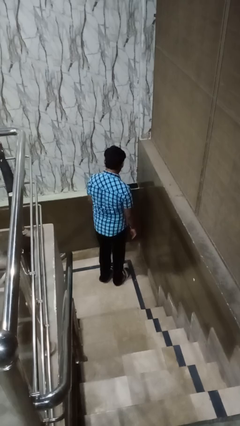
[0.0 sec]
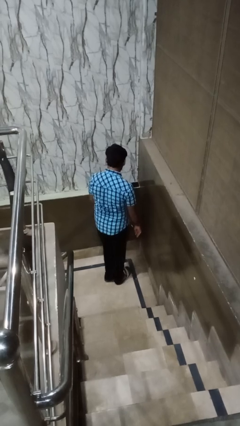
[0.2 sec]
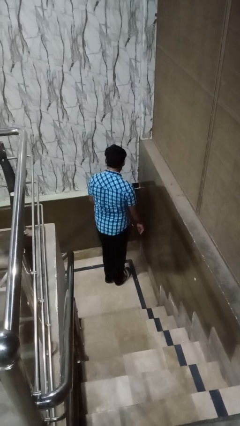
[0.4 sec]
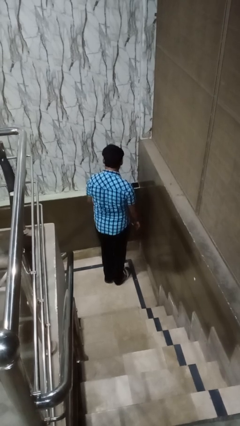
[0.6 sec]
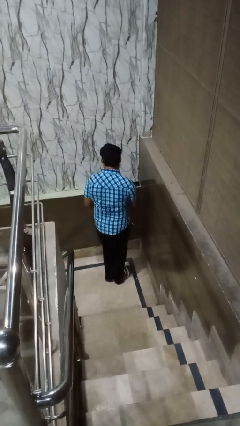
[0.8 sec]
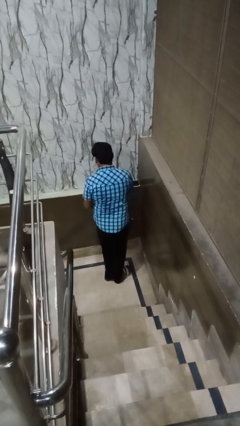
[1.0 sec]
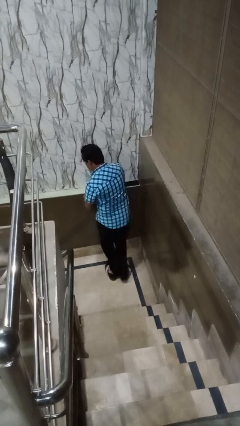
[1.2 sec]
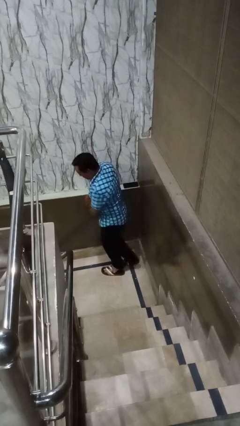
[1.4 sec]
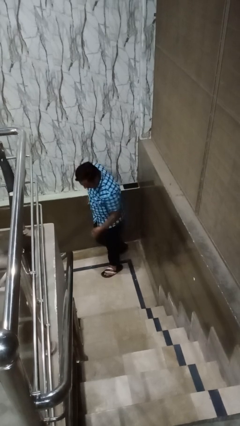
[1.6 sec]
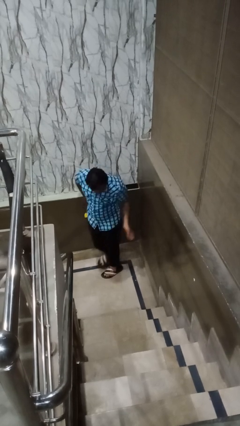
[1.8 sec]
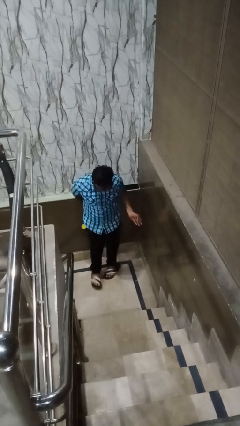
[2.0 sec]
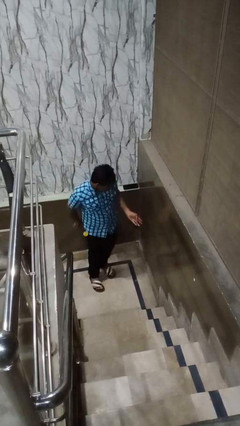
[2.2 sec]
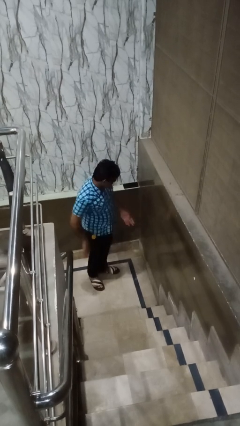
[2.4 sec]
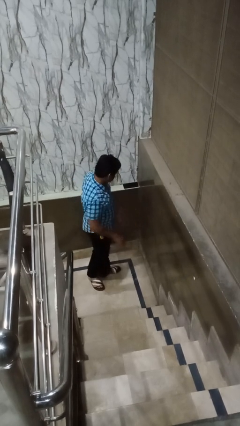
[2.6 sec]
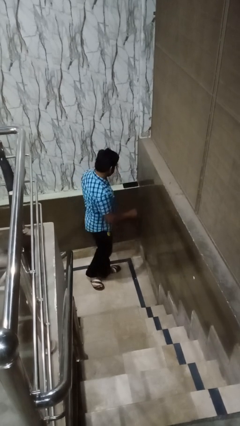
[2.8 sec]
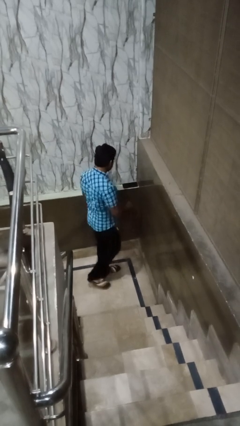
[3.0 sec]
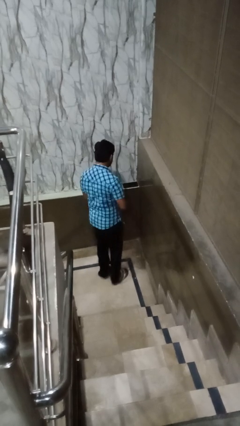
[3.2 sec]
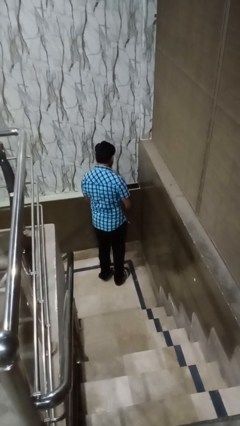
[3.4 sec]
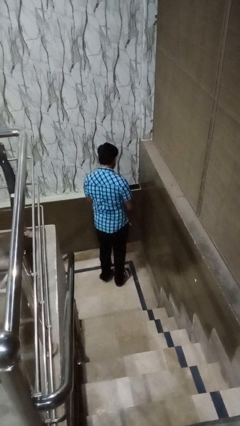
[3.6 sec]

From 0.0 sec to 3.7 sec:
person twirls

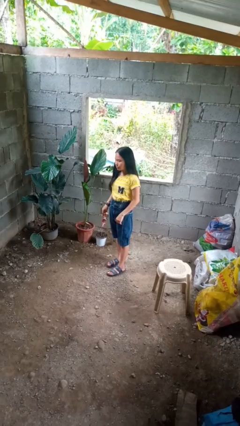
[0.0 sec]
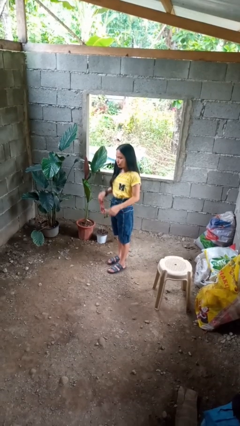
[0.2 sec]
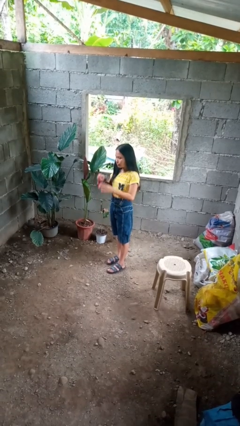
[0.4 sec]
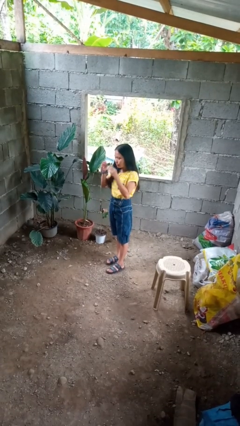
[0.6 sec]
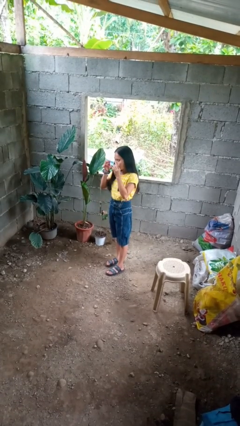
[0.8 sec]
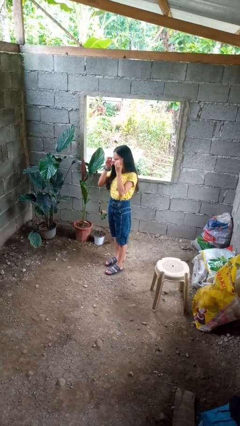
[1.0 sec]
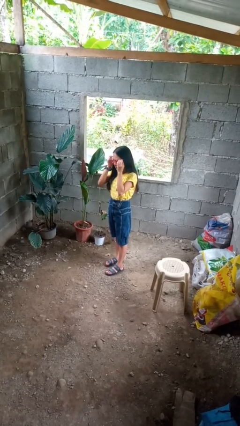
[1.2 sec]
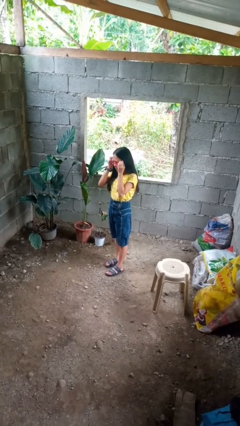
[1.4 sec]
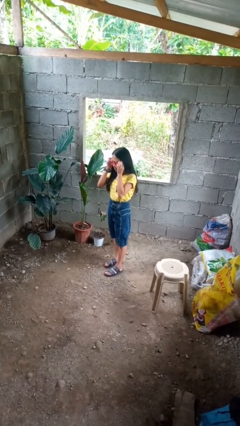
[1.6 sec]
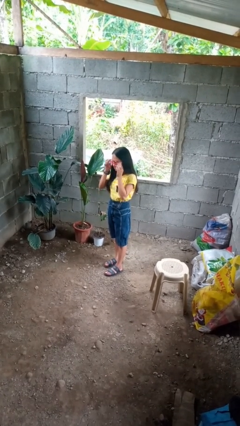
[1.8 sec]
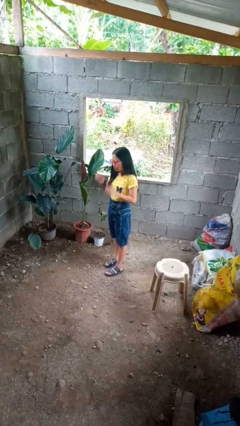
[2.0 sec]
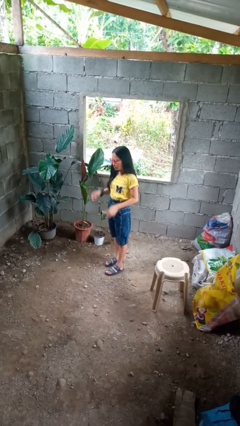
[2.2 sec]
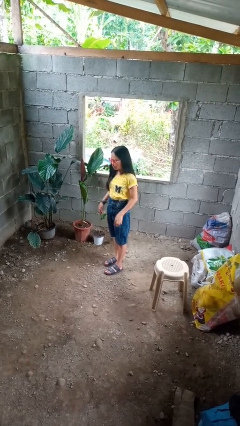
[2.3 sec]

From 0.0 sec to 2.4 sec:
person puts on sunglasses

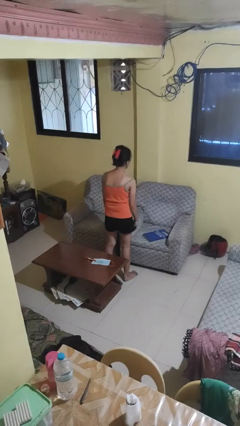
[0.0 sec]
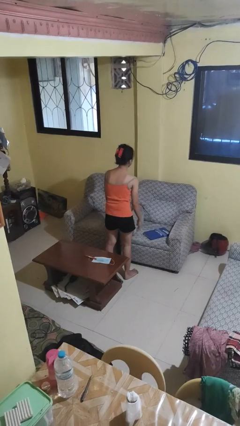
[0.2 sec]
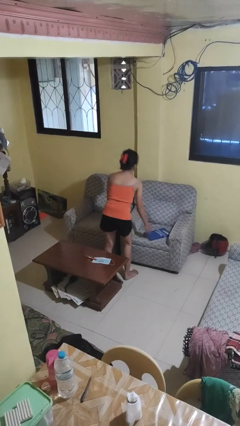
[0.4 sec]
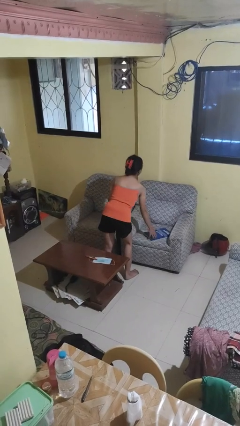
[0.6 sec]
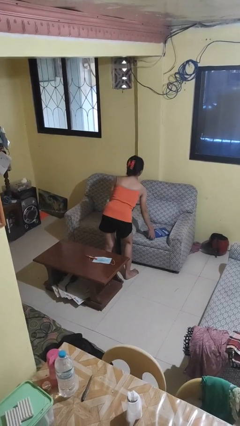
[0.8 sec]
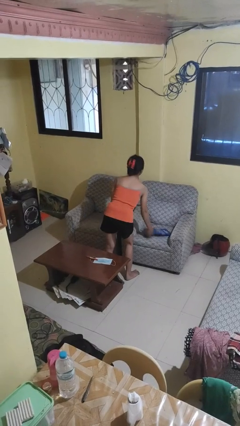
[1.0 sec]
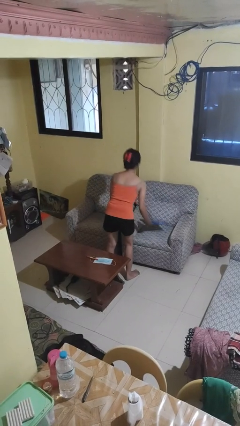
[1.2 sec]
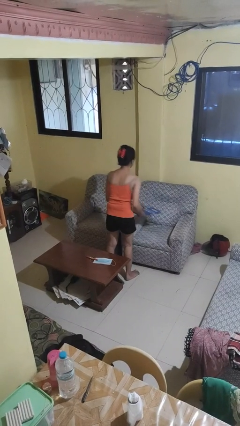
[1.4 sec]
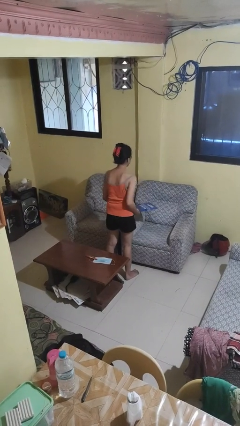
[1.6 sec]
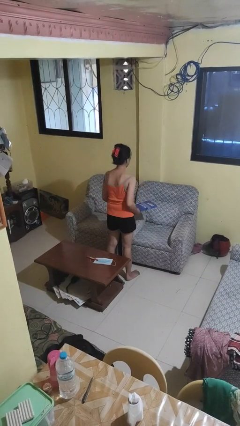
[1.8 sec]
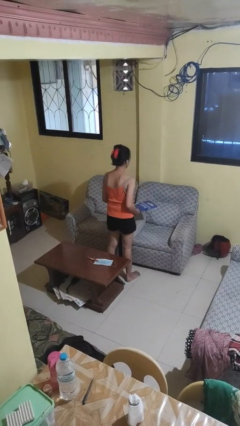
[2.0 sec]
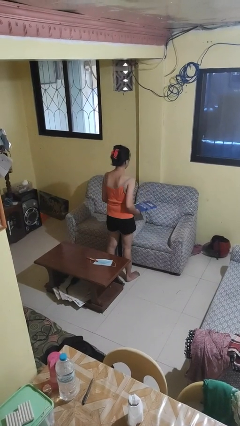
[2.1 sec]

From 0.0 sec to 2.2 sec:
person picks up object from couch

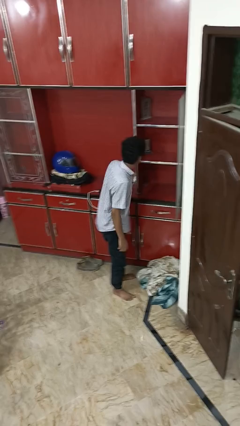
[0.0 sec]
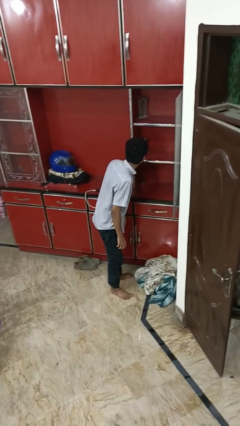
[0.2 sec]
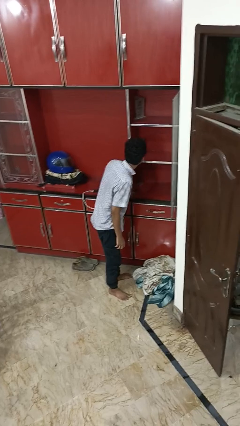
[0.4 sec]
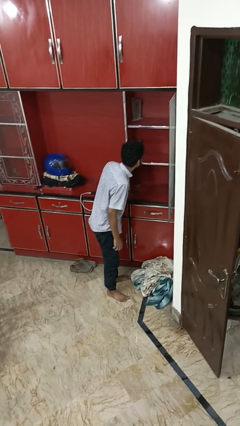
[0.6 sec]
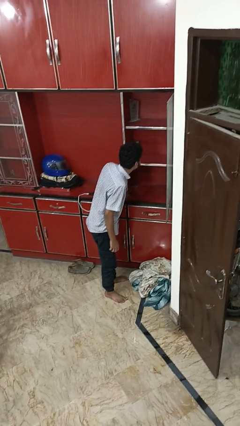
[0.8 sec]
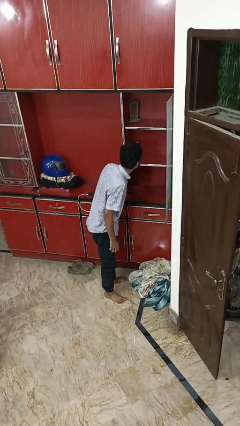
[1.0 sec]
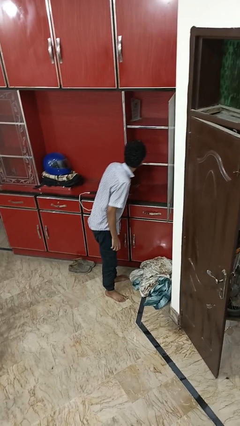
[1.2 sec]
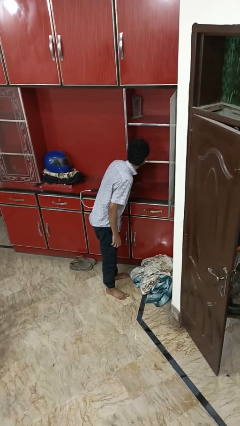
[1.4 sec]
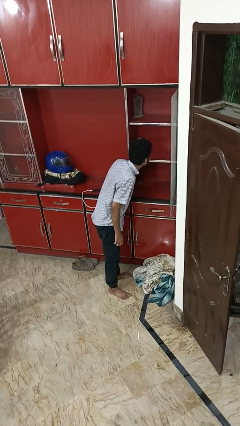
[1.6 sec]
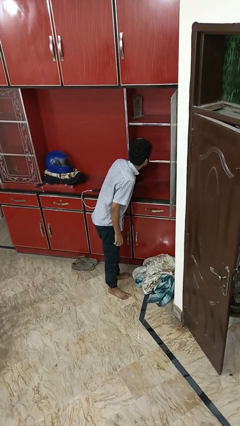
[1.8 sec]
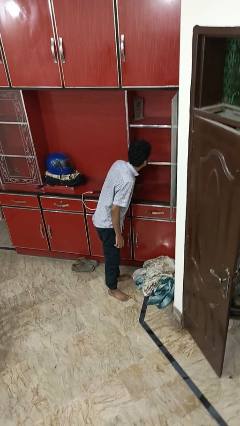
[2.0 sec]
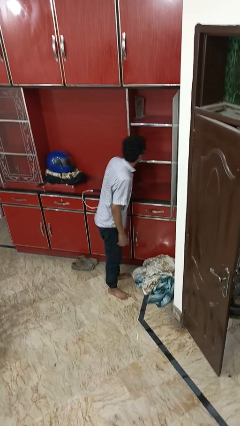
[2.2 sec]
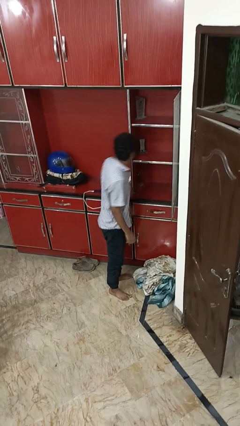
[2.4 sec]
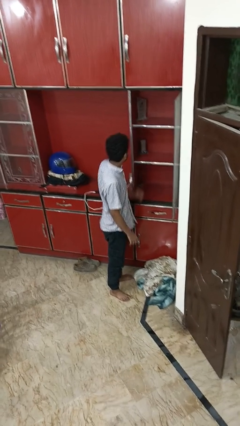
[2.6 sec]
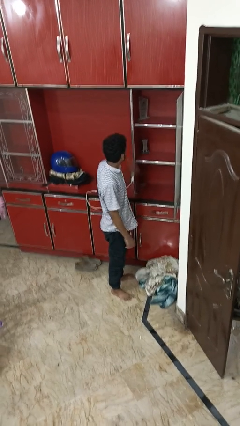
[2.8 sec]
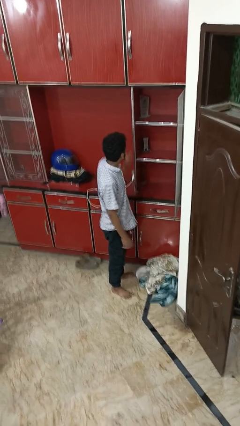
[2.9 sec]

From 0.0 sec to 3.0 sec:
person searches in cabinet

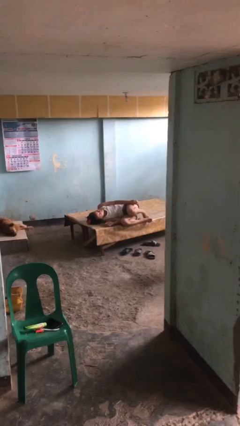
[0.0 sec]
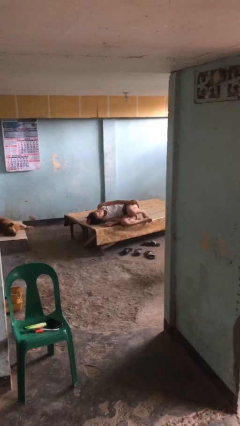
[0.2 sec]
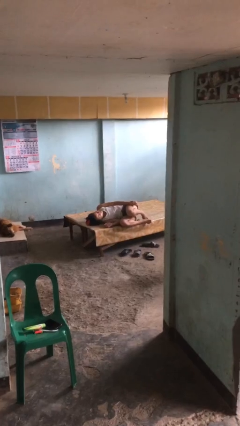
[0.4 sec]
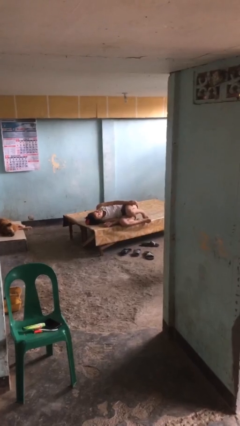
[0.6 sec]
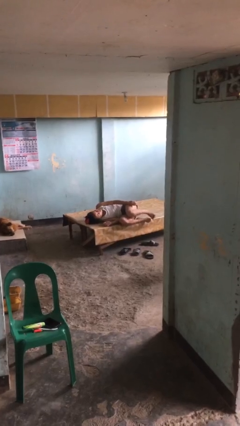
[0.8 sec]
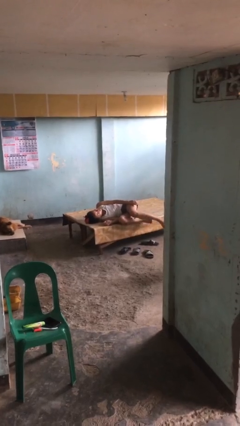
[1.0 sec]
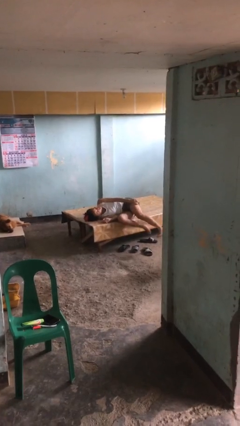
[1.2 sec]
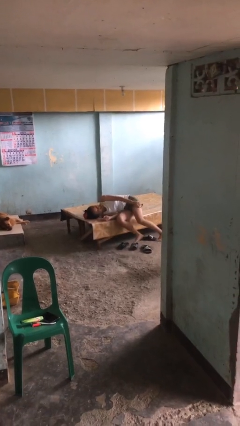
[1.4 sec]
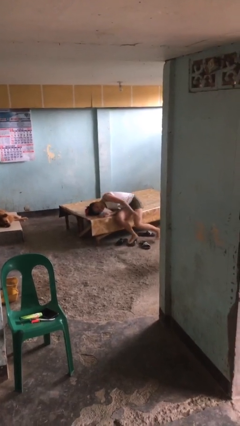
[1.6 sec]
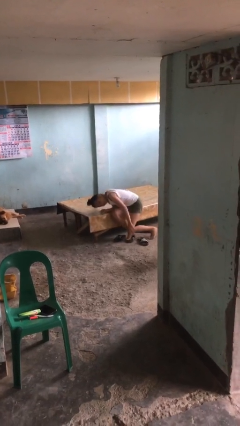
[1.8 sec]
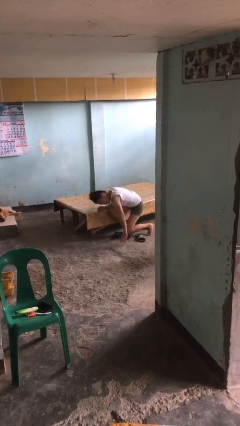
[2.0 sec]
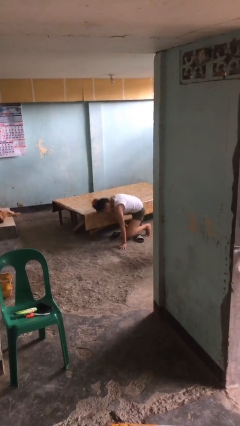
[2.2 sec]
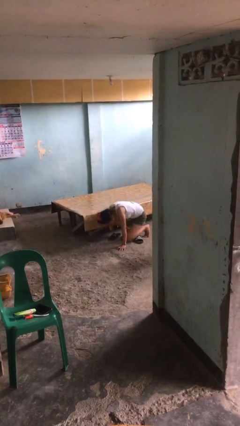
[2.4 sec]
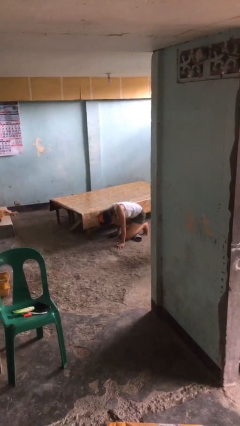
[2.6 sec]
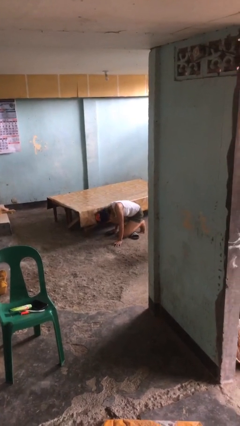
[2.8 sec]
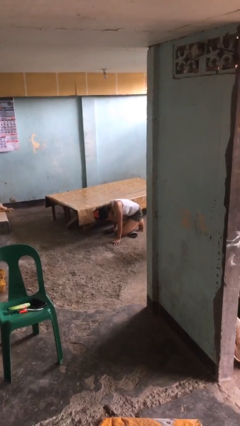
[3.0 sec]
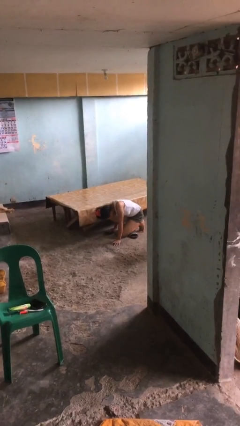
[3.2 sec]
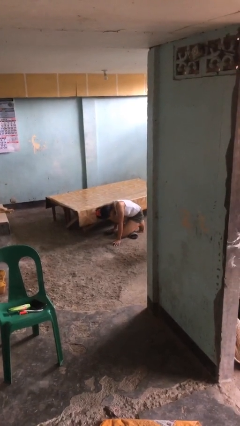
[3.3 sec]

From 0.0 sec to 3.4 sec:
person falls from bed

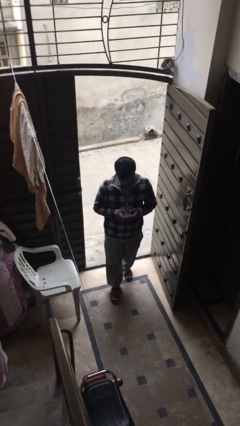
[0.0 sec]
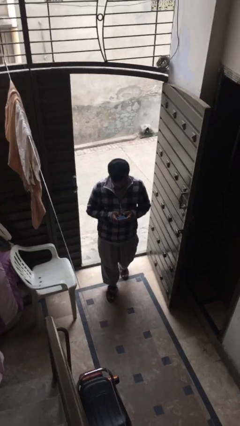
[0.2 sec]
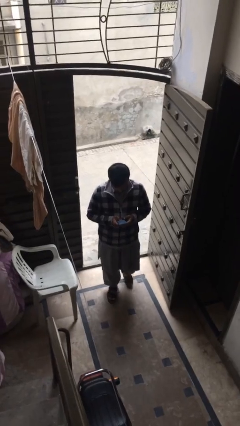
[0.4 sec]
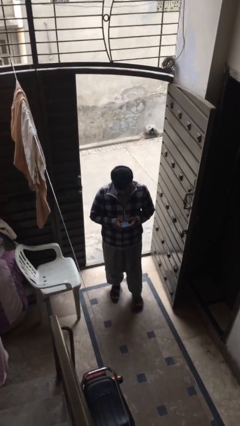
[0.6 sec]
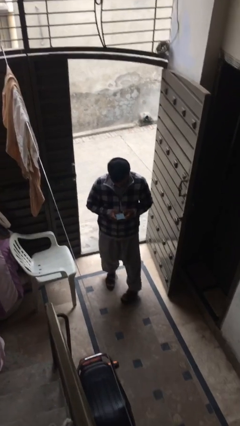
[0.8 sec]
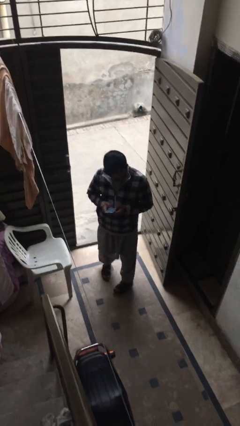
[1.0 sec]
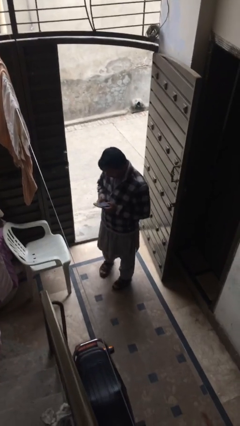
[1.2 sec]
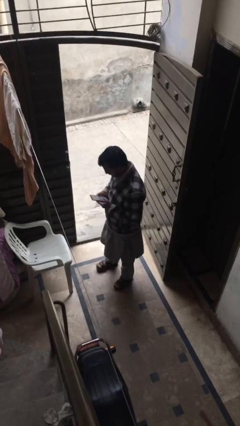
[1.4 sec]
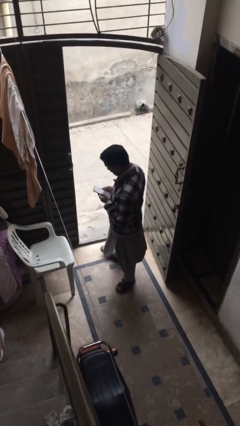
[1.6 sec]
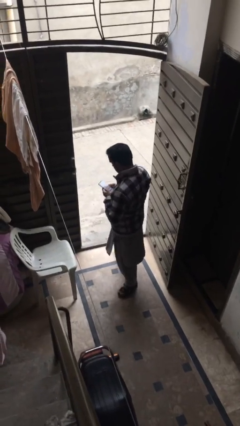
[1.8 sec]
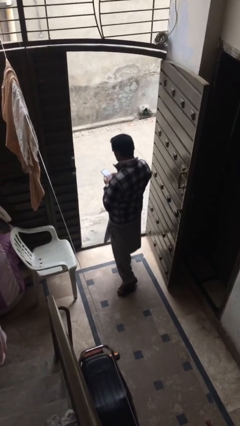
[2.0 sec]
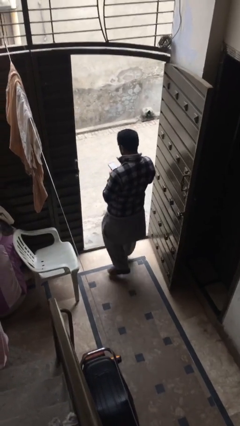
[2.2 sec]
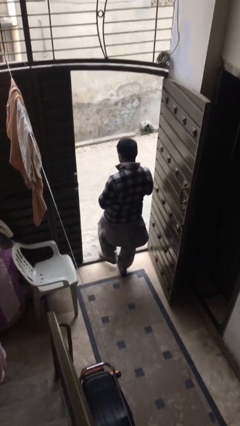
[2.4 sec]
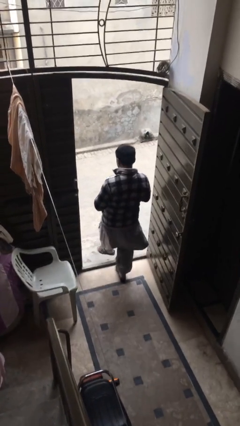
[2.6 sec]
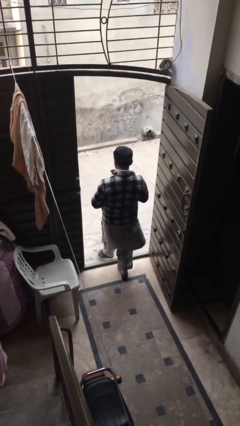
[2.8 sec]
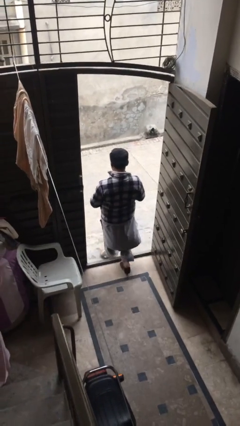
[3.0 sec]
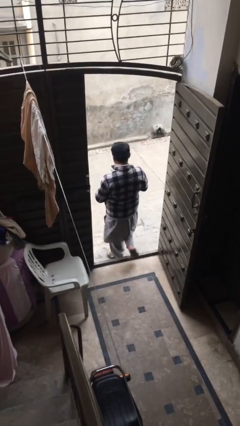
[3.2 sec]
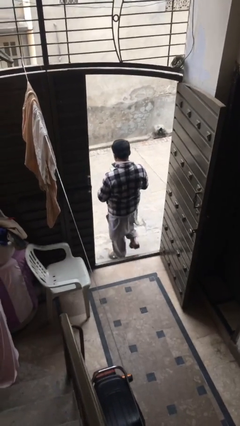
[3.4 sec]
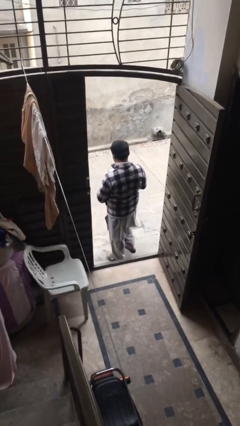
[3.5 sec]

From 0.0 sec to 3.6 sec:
person exits scene through structure
